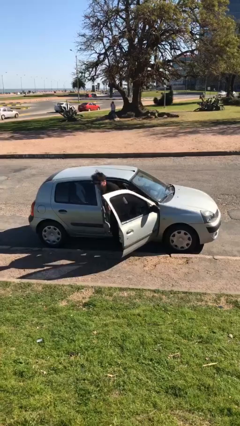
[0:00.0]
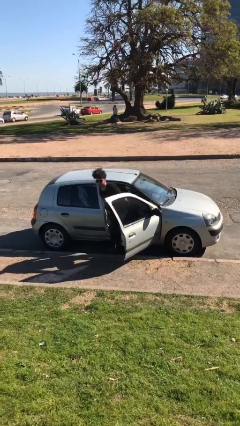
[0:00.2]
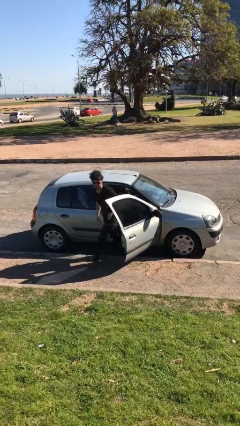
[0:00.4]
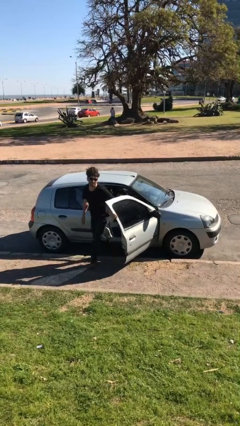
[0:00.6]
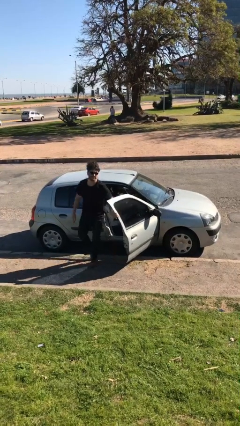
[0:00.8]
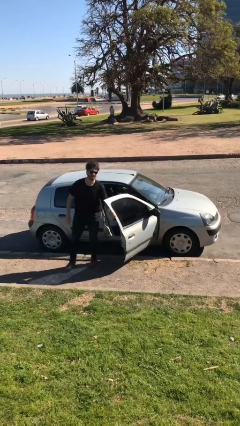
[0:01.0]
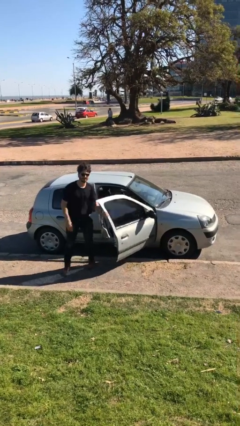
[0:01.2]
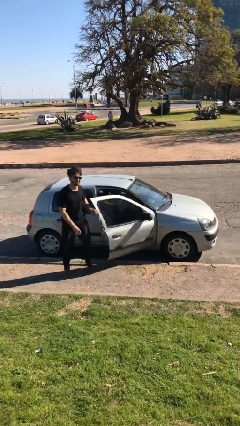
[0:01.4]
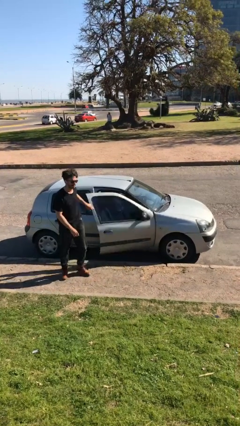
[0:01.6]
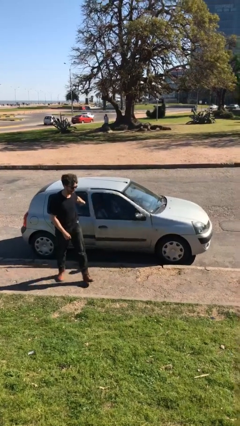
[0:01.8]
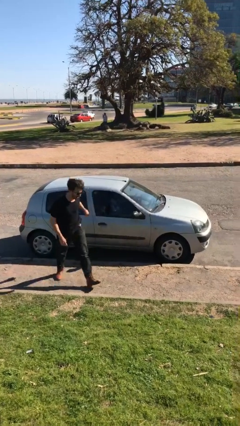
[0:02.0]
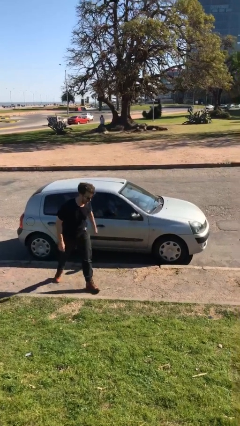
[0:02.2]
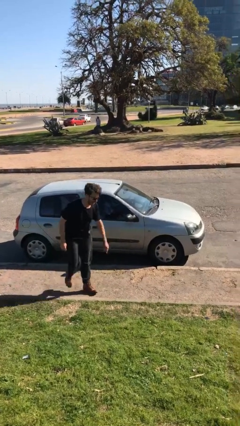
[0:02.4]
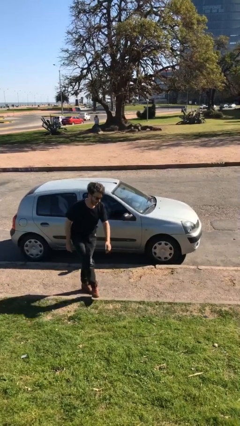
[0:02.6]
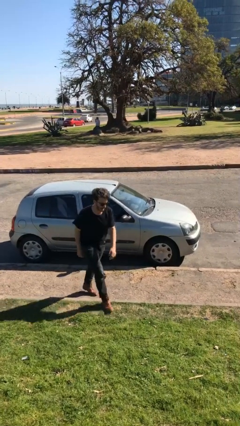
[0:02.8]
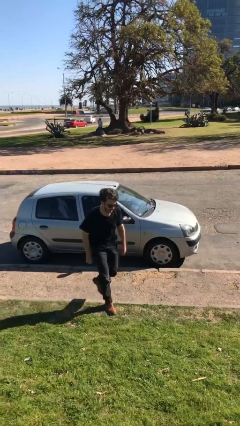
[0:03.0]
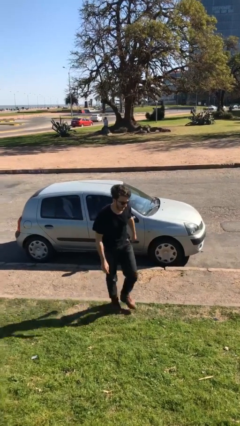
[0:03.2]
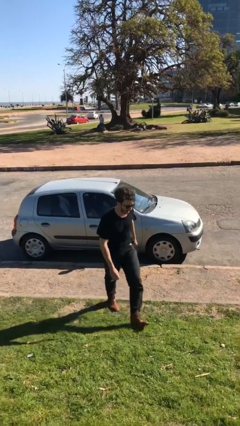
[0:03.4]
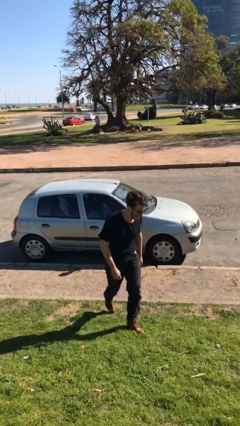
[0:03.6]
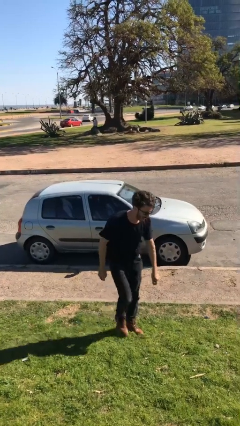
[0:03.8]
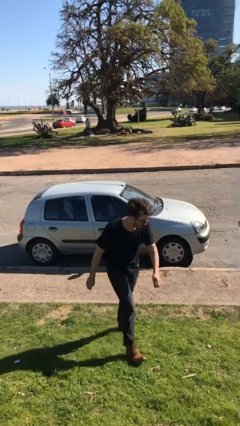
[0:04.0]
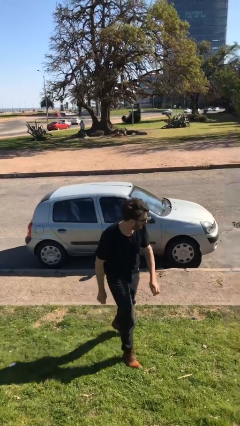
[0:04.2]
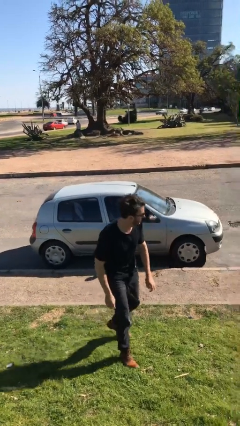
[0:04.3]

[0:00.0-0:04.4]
car drops off person

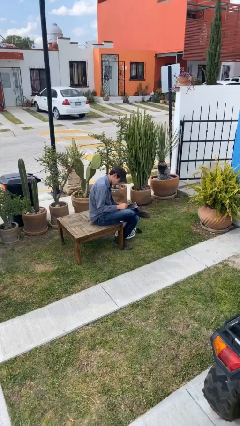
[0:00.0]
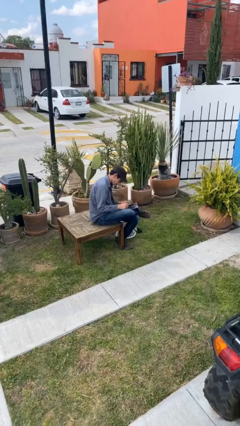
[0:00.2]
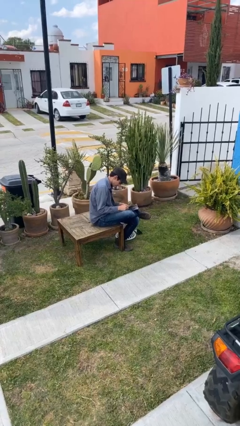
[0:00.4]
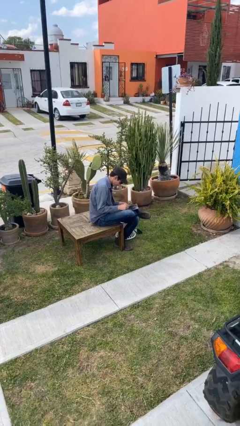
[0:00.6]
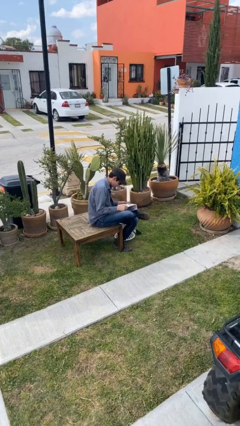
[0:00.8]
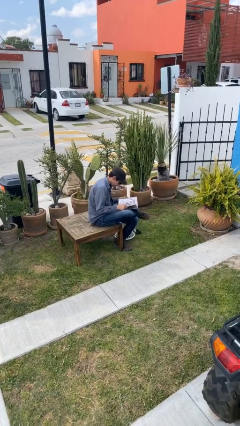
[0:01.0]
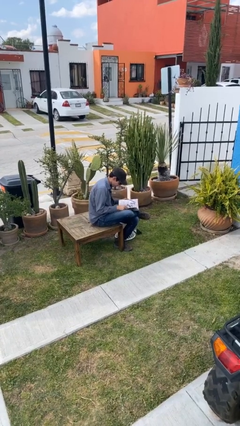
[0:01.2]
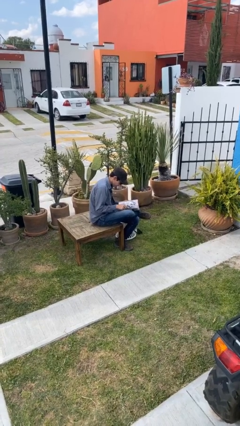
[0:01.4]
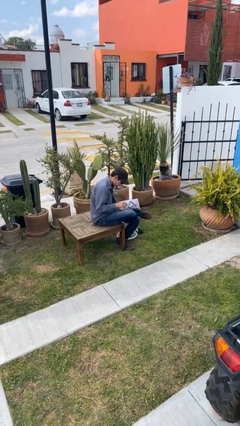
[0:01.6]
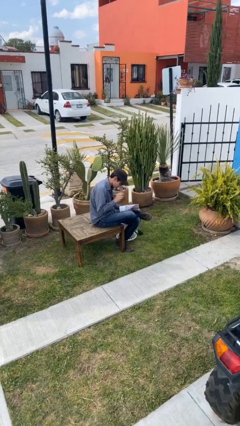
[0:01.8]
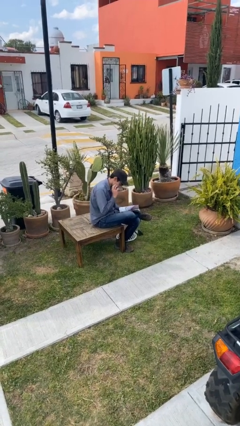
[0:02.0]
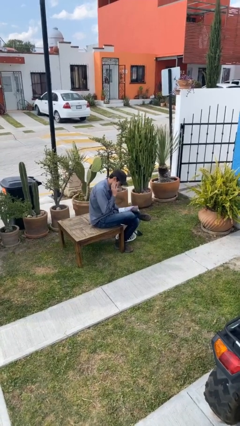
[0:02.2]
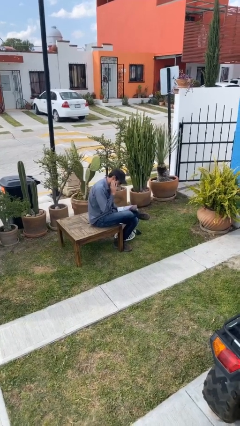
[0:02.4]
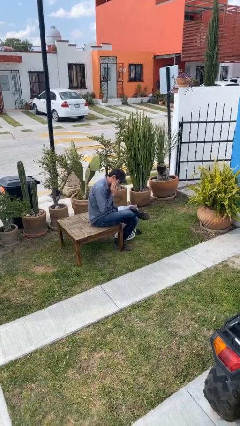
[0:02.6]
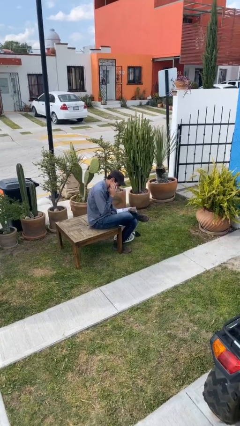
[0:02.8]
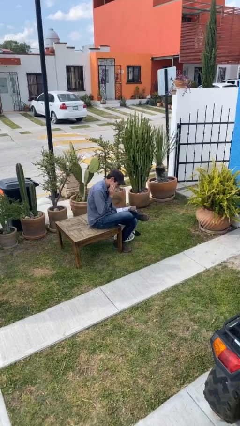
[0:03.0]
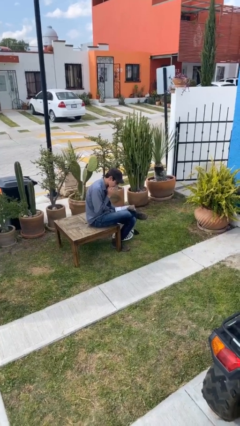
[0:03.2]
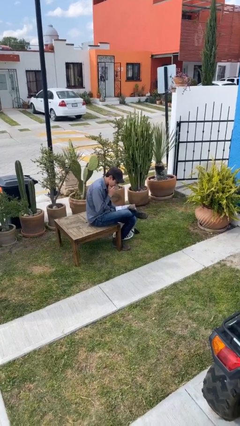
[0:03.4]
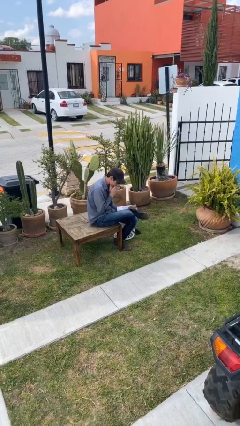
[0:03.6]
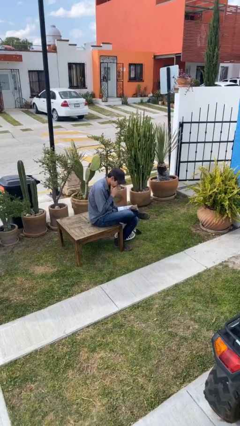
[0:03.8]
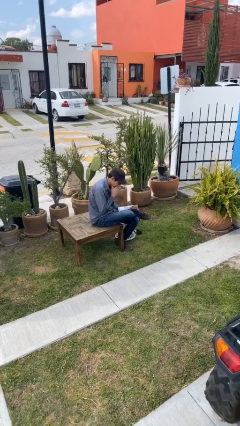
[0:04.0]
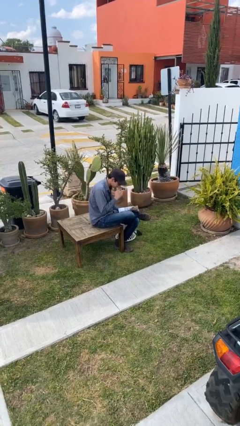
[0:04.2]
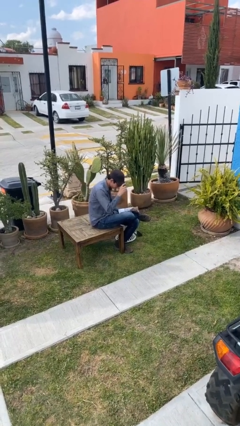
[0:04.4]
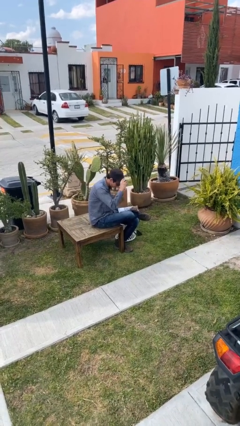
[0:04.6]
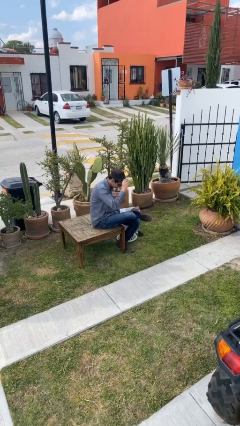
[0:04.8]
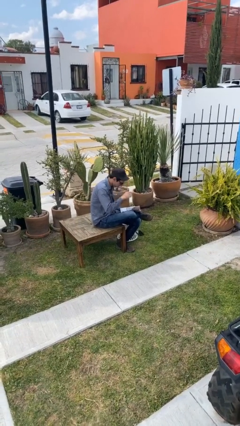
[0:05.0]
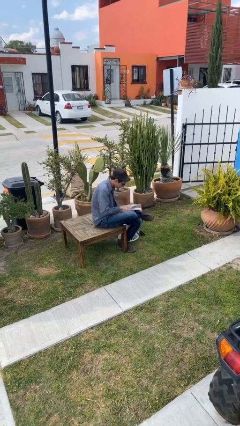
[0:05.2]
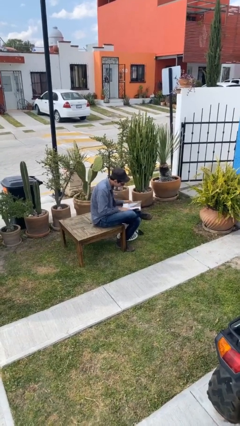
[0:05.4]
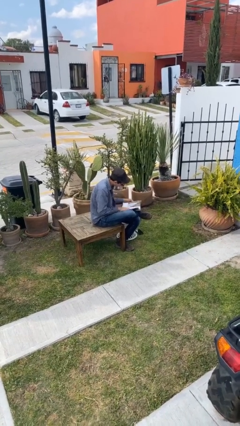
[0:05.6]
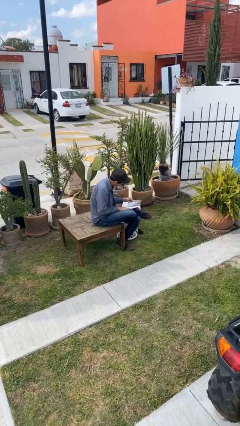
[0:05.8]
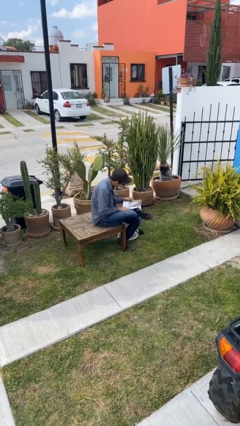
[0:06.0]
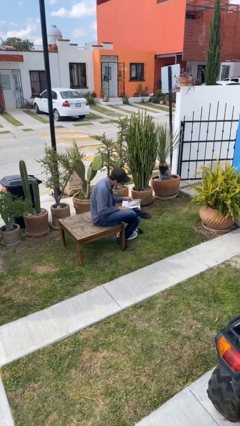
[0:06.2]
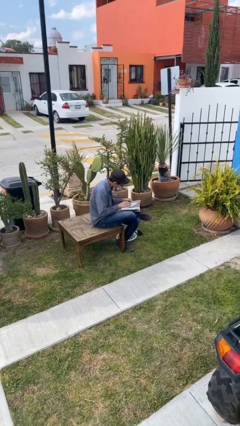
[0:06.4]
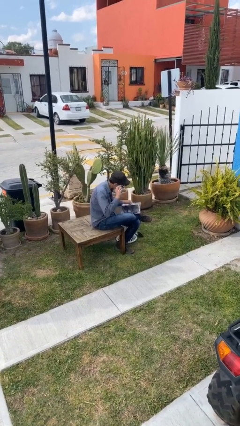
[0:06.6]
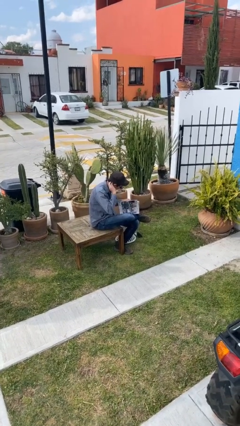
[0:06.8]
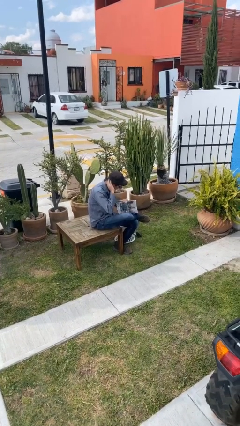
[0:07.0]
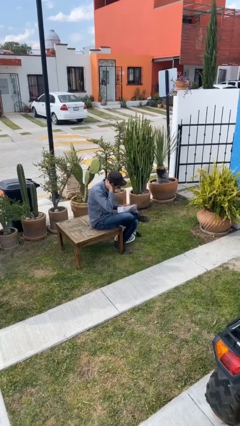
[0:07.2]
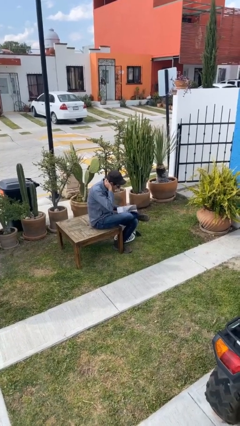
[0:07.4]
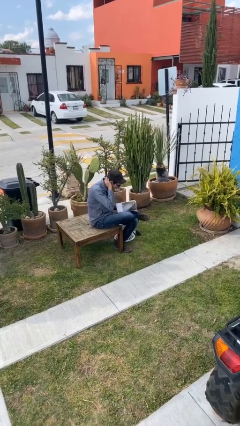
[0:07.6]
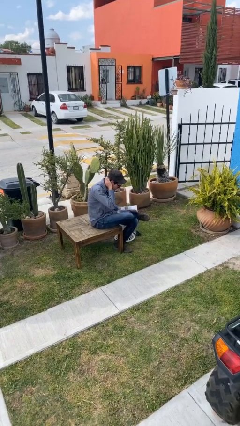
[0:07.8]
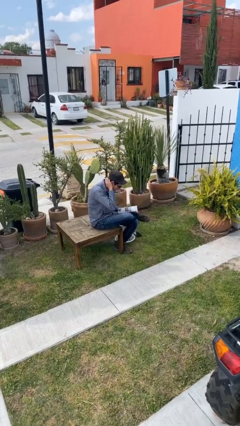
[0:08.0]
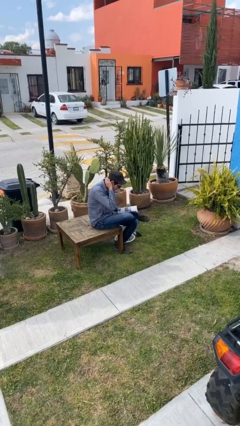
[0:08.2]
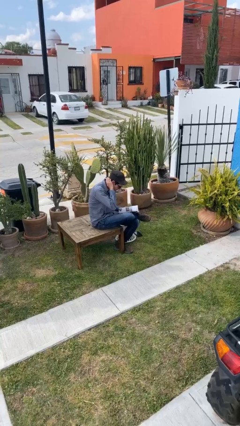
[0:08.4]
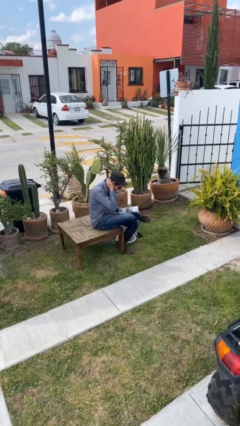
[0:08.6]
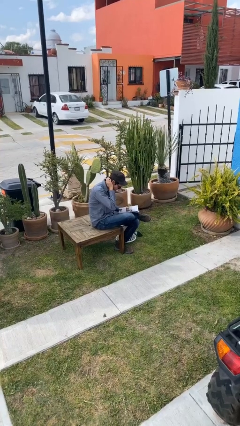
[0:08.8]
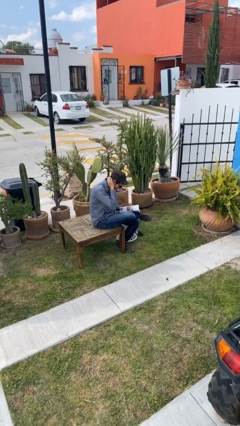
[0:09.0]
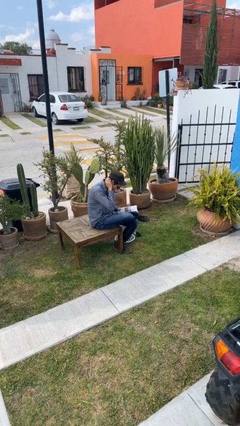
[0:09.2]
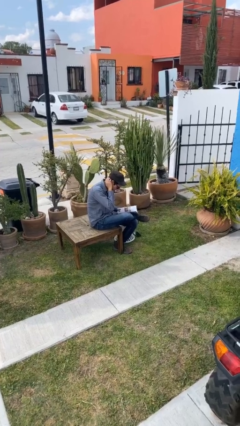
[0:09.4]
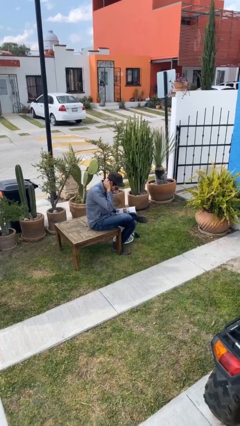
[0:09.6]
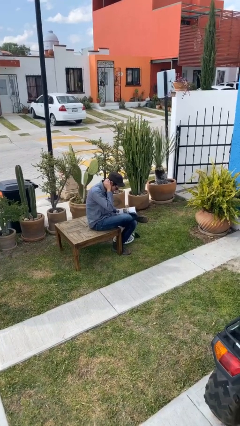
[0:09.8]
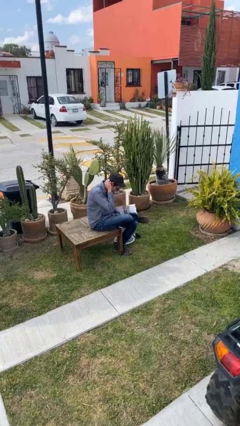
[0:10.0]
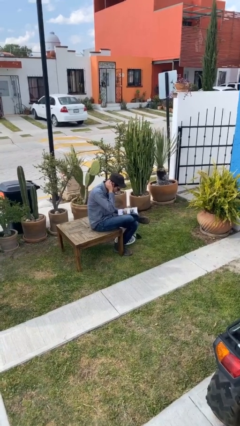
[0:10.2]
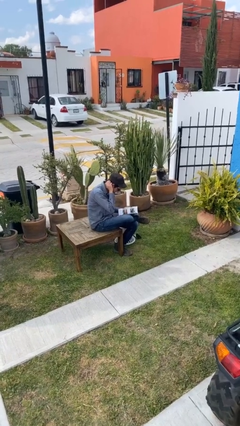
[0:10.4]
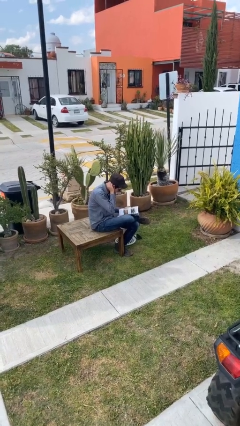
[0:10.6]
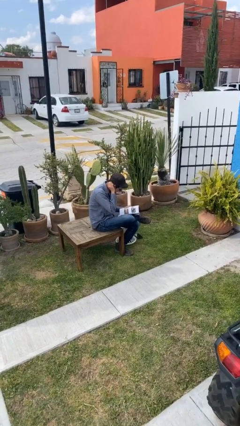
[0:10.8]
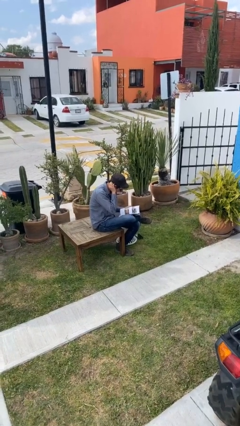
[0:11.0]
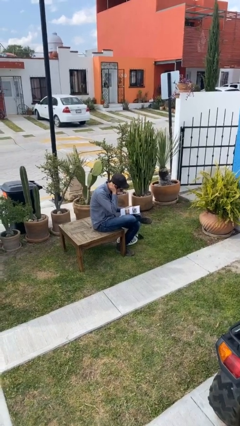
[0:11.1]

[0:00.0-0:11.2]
person reads document

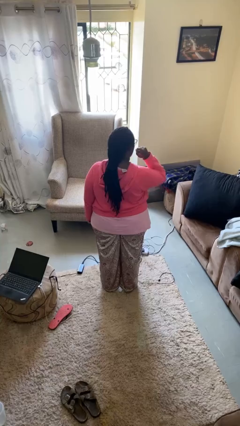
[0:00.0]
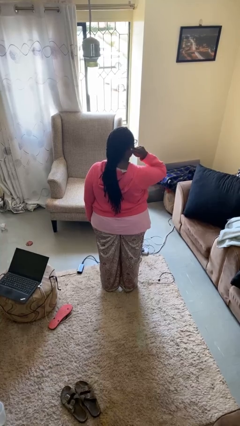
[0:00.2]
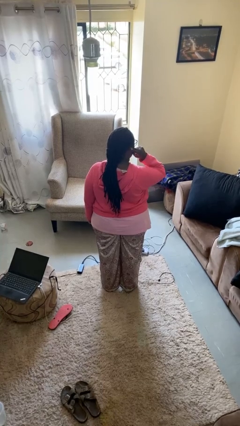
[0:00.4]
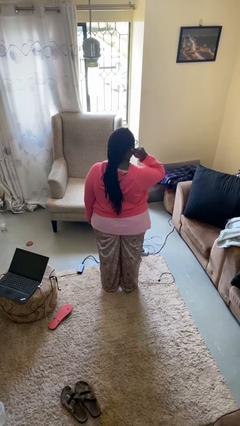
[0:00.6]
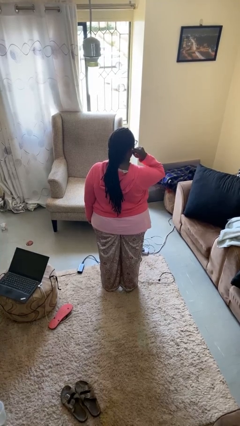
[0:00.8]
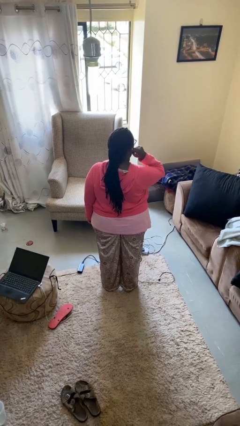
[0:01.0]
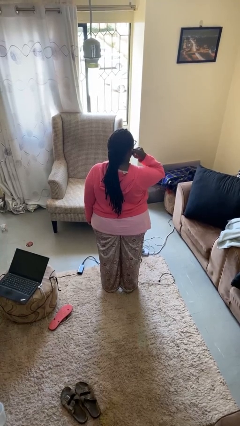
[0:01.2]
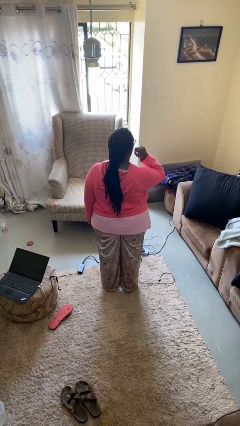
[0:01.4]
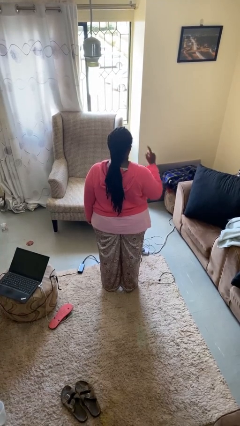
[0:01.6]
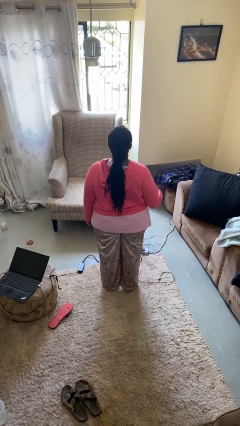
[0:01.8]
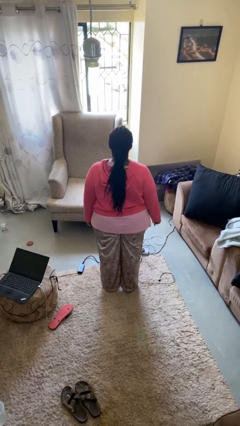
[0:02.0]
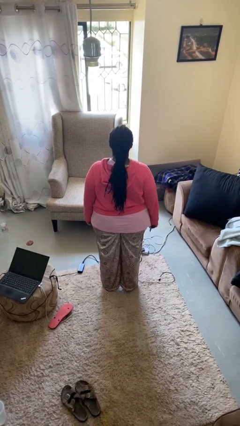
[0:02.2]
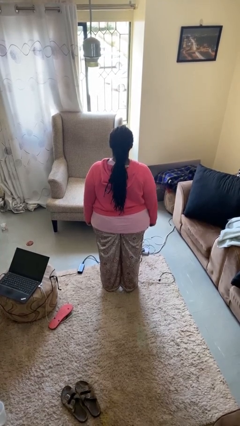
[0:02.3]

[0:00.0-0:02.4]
person gestures listen closely
